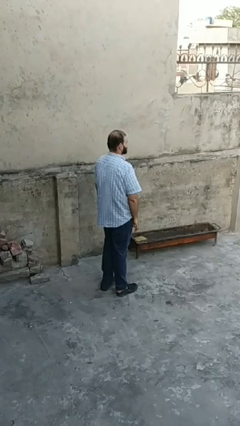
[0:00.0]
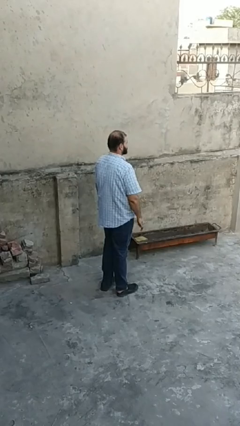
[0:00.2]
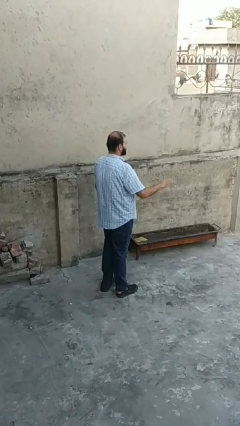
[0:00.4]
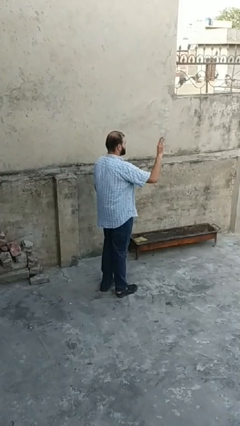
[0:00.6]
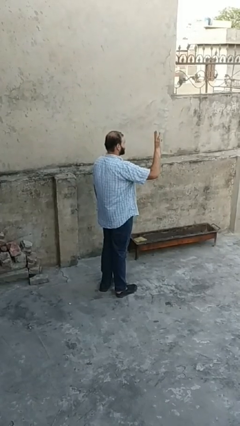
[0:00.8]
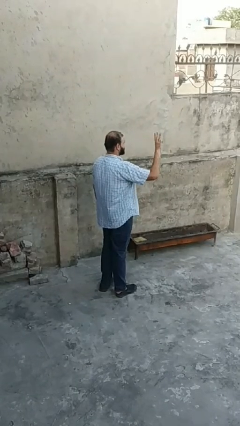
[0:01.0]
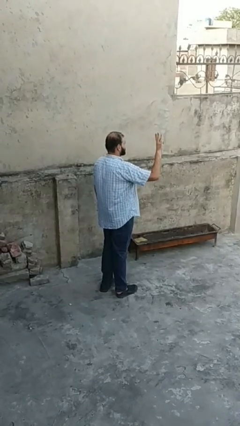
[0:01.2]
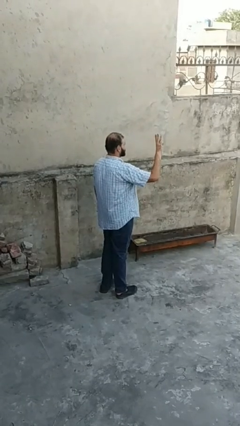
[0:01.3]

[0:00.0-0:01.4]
person gestures number three

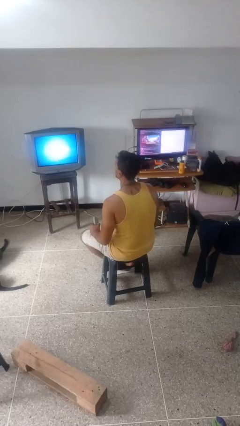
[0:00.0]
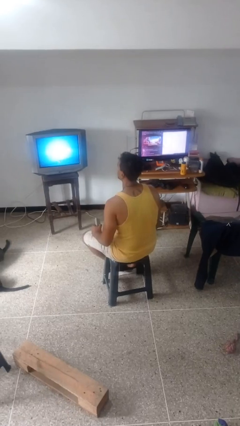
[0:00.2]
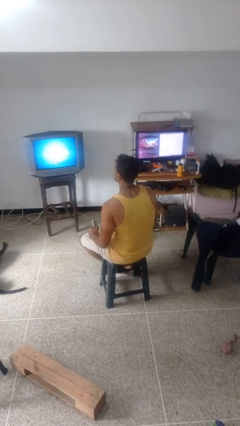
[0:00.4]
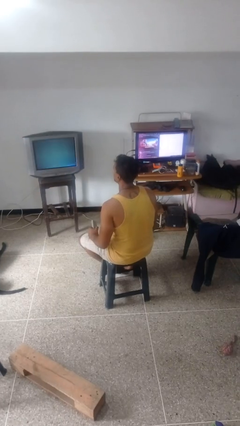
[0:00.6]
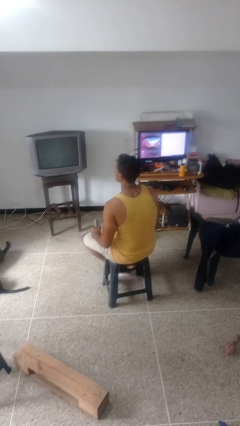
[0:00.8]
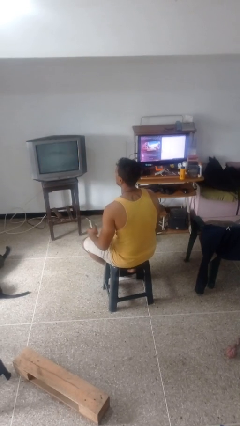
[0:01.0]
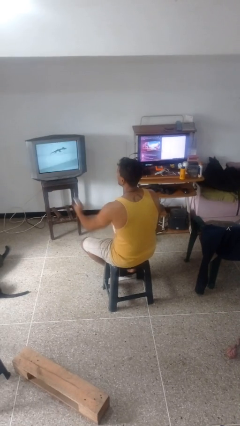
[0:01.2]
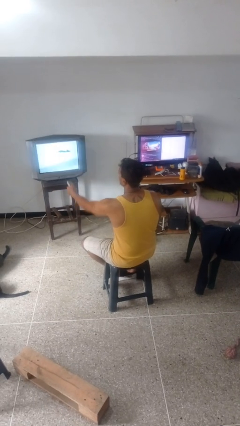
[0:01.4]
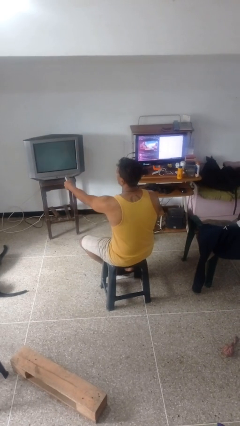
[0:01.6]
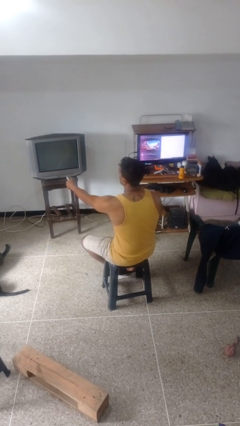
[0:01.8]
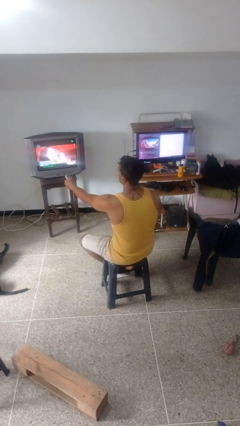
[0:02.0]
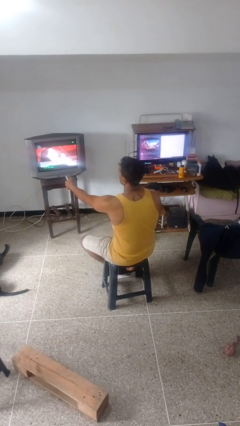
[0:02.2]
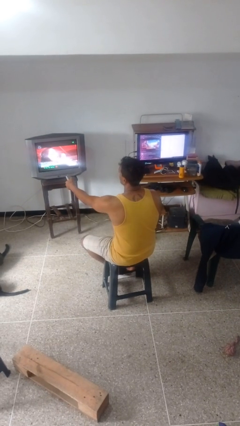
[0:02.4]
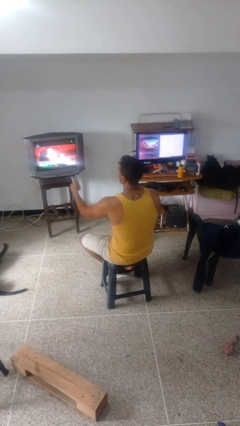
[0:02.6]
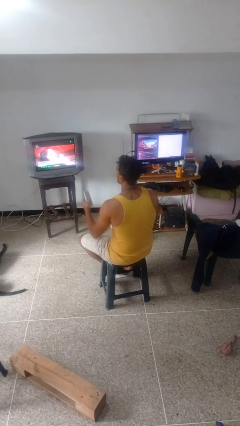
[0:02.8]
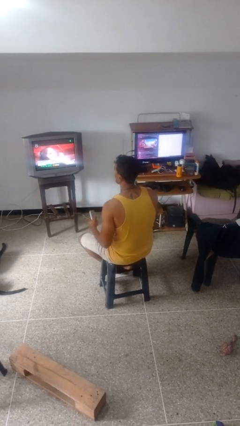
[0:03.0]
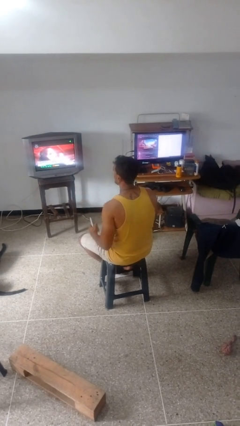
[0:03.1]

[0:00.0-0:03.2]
person uses television remote

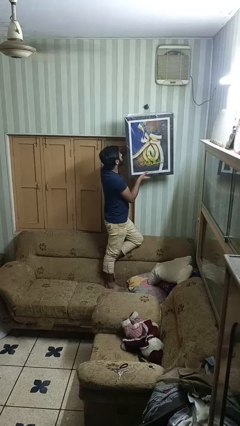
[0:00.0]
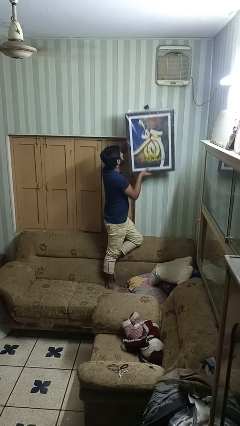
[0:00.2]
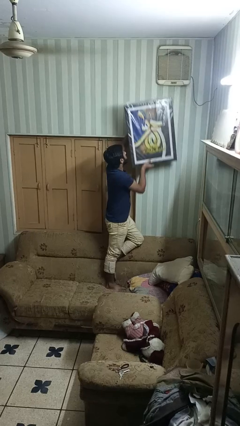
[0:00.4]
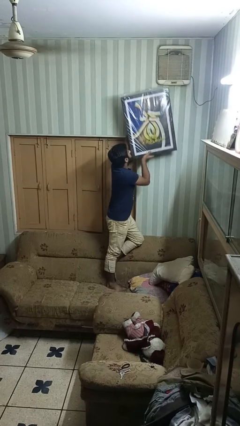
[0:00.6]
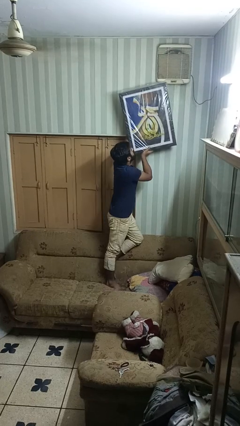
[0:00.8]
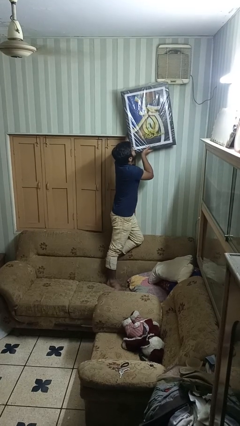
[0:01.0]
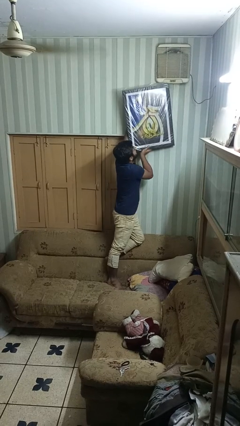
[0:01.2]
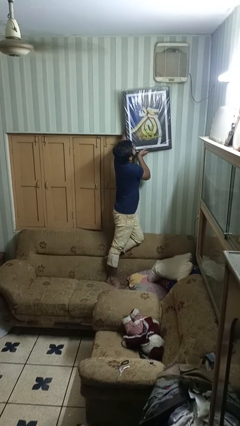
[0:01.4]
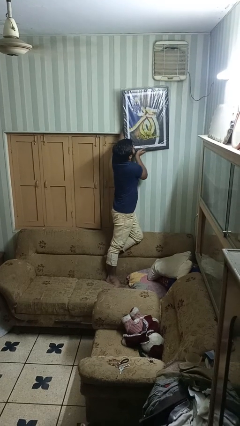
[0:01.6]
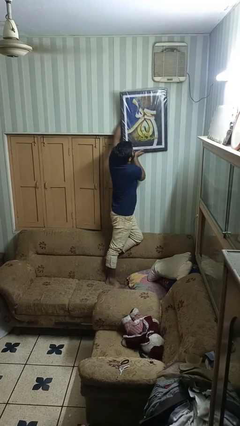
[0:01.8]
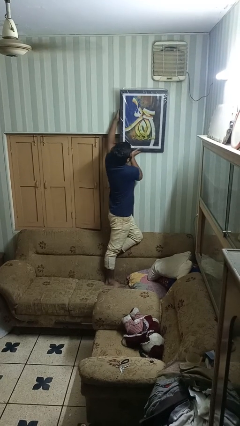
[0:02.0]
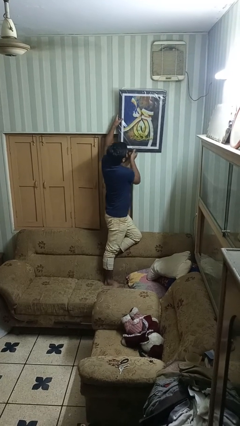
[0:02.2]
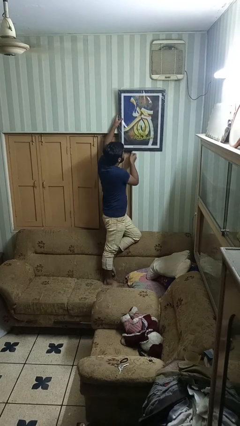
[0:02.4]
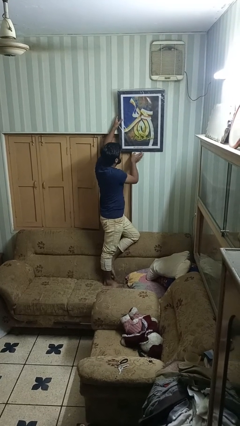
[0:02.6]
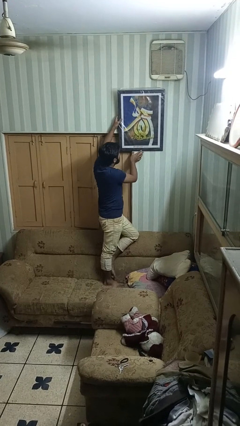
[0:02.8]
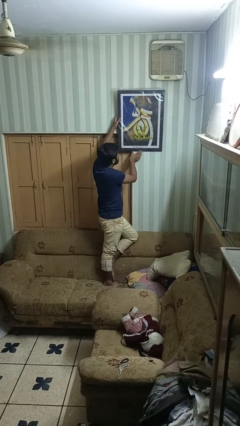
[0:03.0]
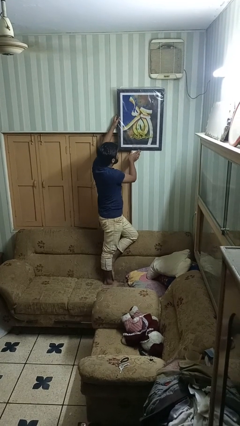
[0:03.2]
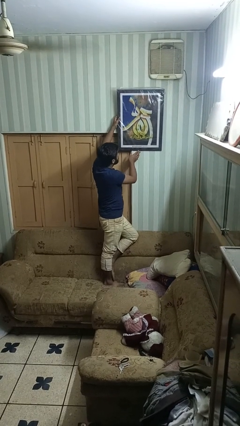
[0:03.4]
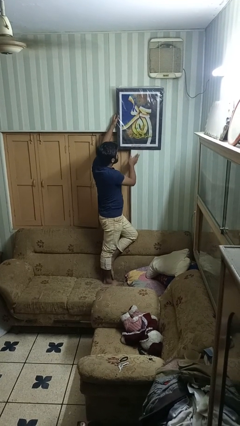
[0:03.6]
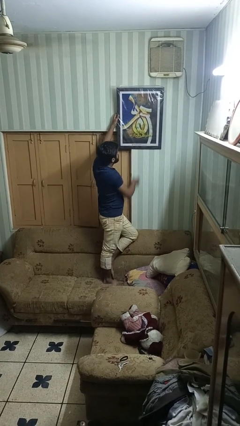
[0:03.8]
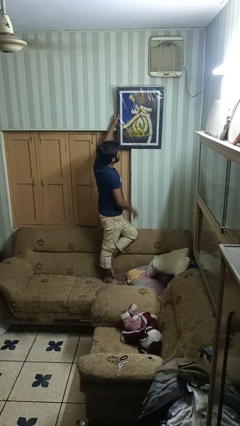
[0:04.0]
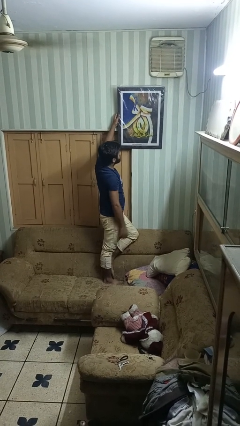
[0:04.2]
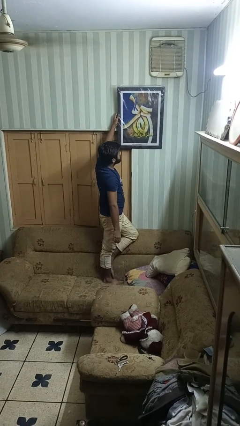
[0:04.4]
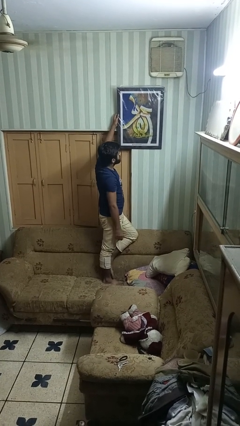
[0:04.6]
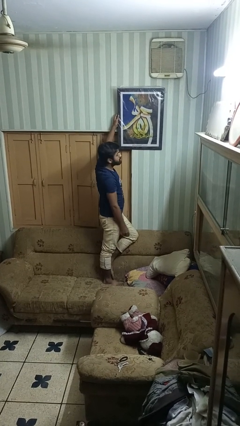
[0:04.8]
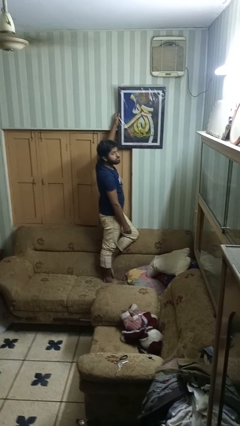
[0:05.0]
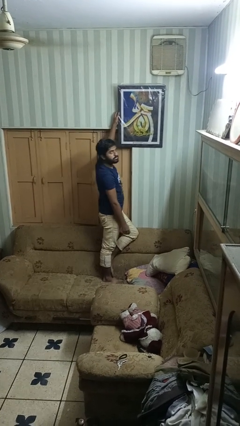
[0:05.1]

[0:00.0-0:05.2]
person puts up picture frame

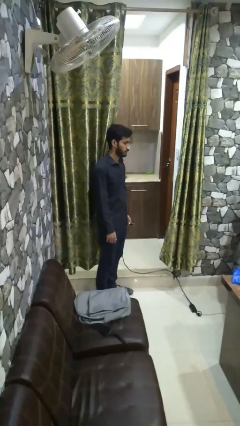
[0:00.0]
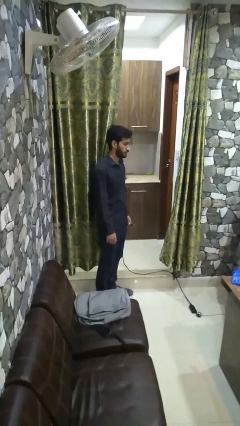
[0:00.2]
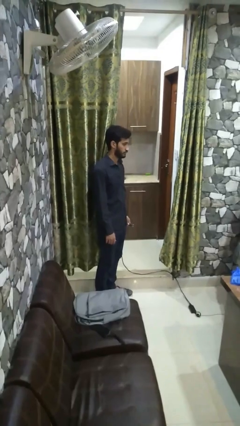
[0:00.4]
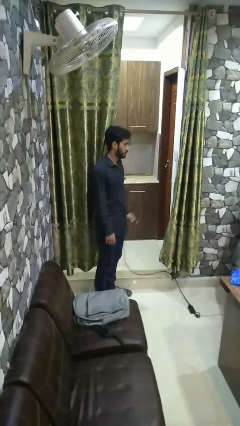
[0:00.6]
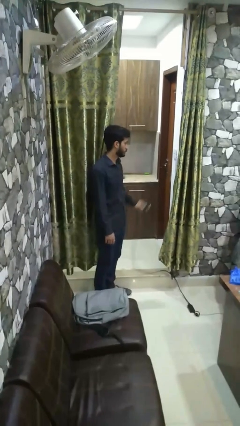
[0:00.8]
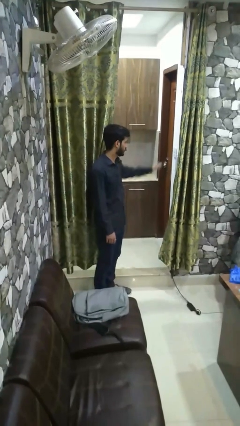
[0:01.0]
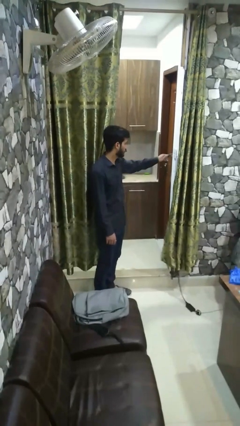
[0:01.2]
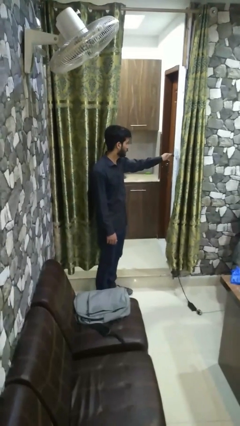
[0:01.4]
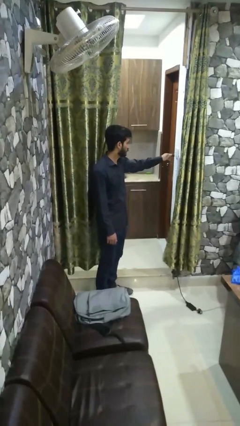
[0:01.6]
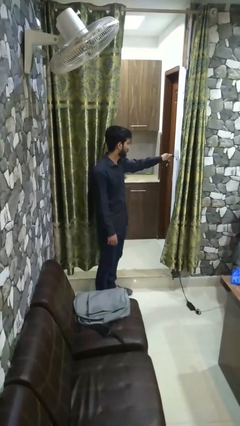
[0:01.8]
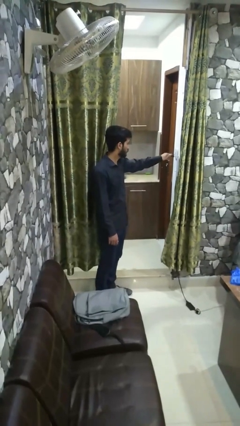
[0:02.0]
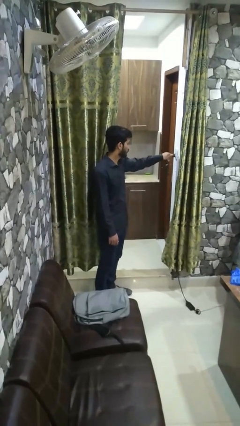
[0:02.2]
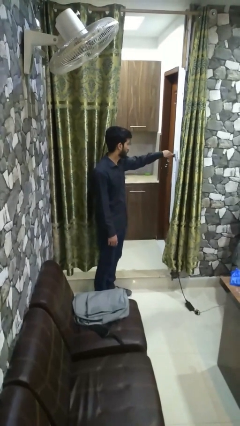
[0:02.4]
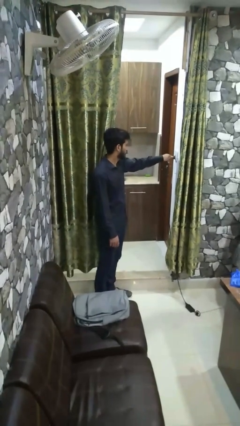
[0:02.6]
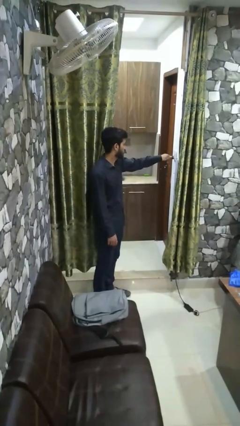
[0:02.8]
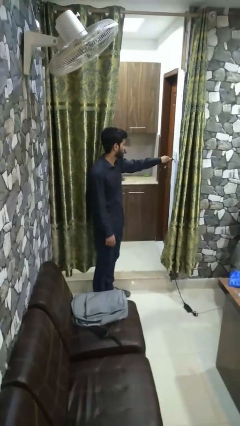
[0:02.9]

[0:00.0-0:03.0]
person plugs into electrical socket

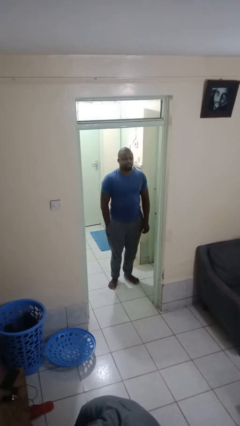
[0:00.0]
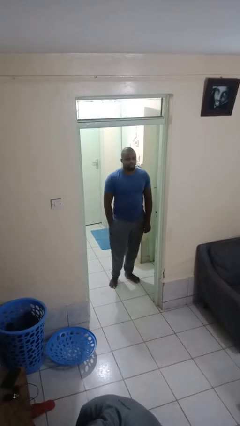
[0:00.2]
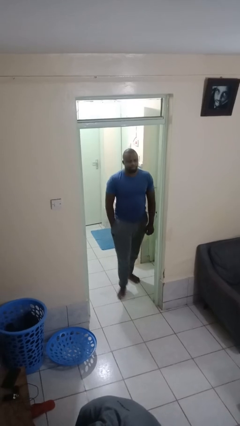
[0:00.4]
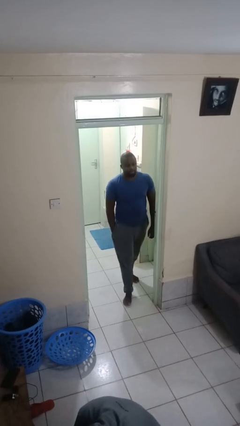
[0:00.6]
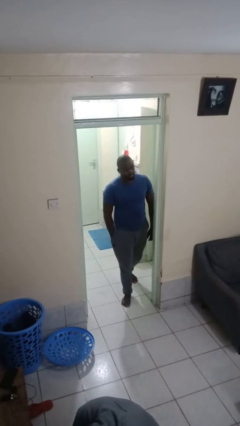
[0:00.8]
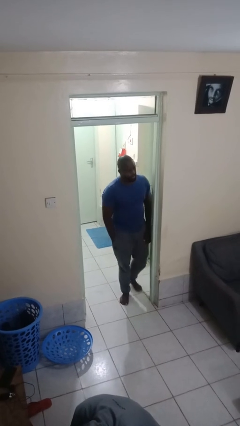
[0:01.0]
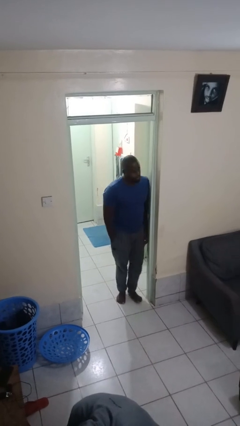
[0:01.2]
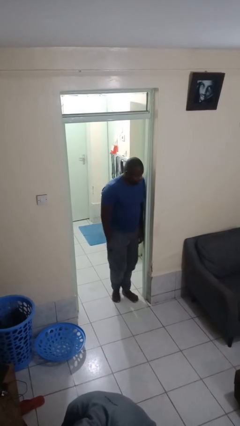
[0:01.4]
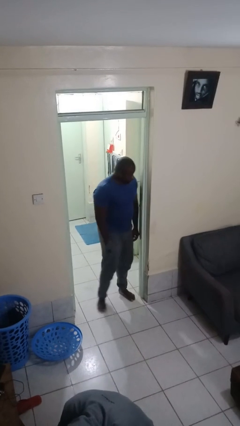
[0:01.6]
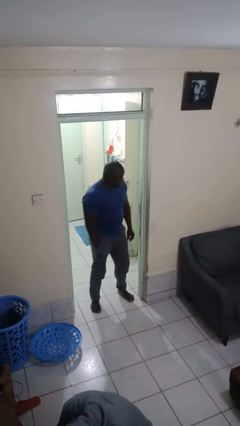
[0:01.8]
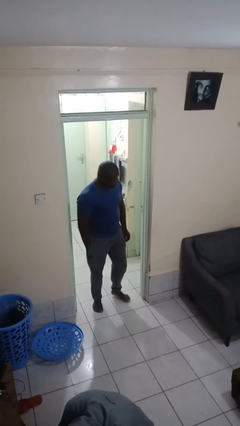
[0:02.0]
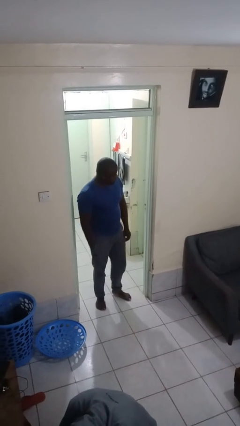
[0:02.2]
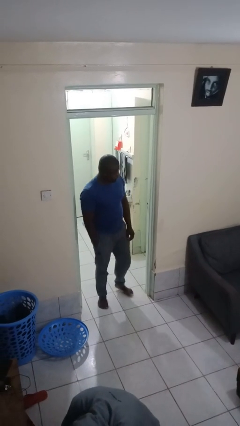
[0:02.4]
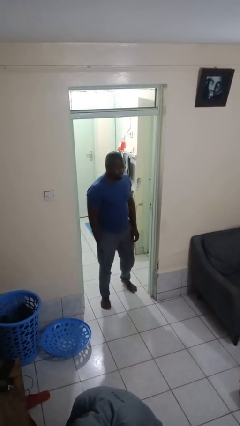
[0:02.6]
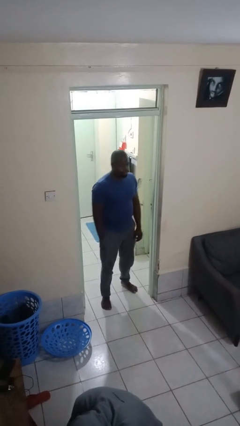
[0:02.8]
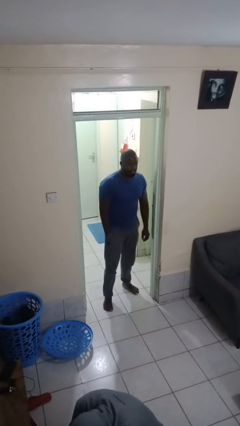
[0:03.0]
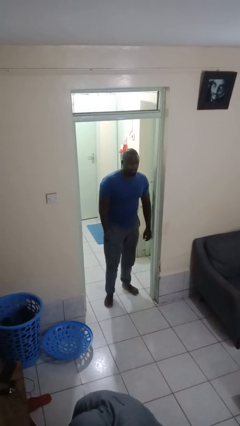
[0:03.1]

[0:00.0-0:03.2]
person bumps into wall

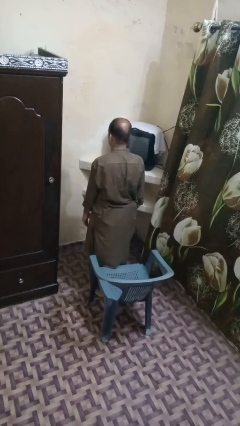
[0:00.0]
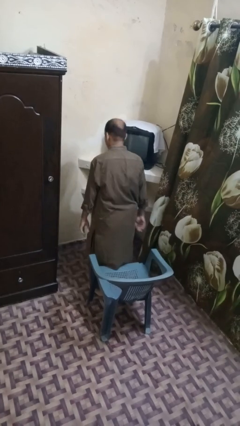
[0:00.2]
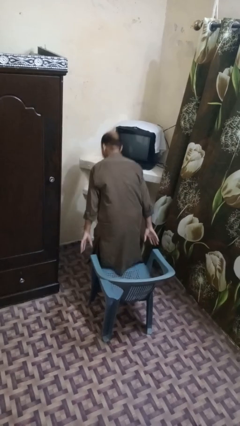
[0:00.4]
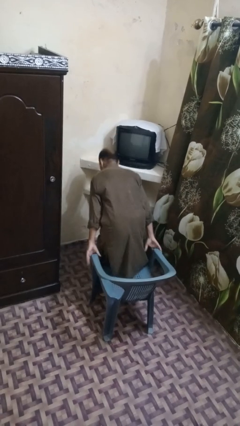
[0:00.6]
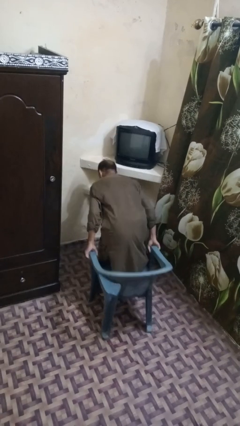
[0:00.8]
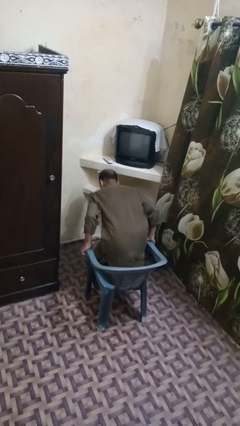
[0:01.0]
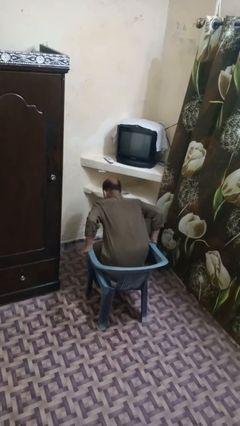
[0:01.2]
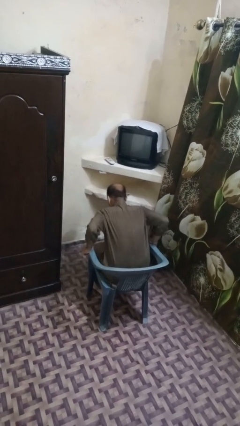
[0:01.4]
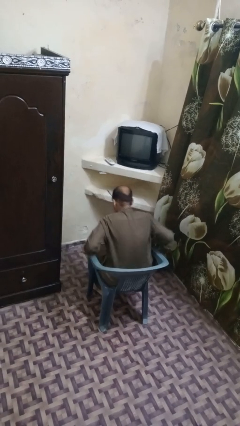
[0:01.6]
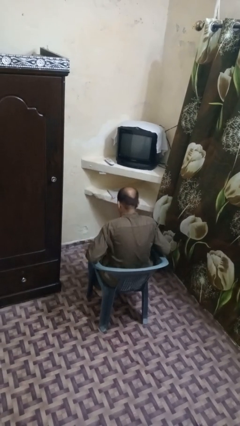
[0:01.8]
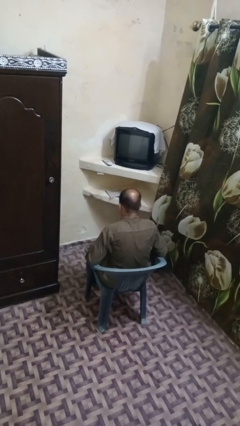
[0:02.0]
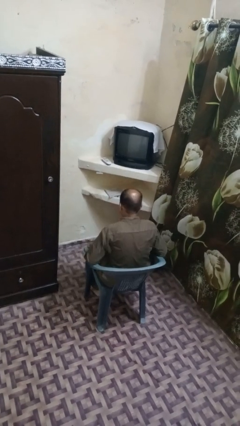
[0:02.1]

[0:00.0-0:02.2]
person sits down
